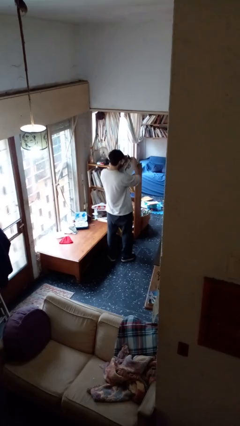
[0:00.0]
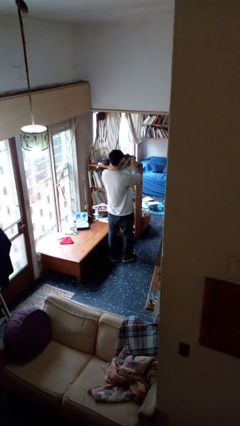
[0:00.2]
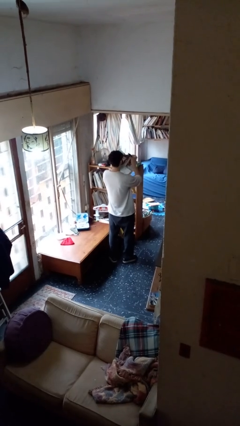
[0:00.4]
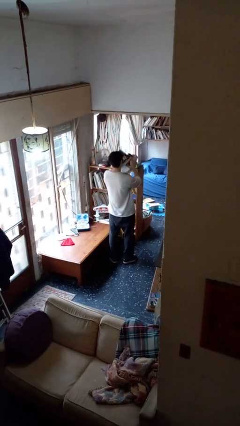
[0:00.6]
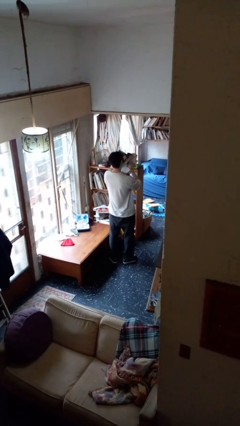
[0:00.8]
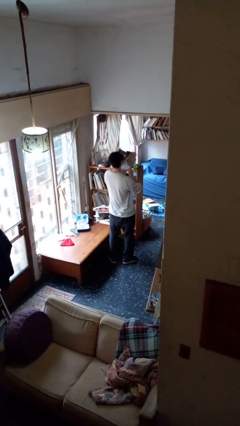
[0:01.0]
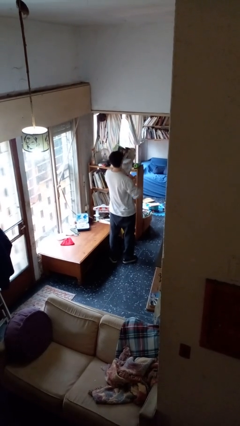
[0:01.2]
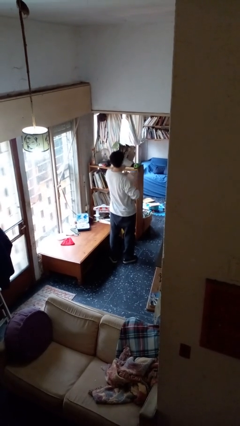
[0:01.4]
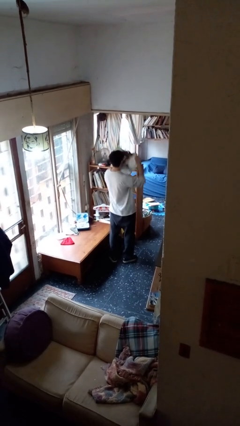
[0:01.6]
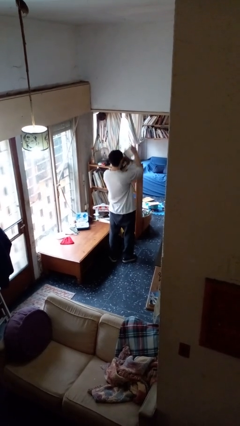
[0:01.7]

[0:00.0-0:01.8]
person tears paper

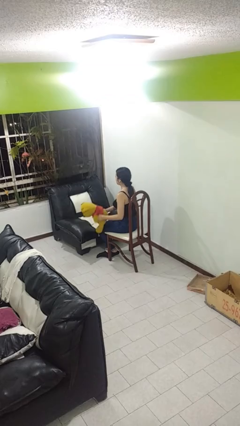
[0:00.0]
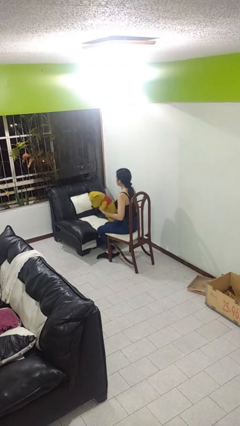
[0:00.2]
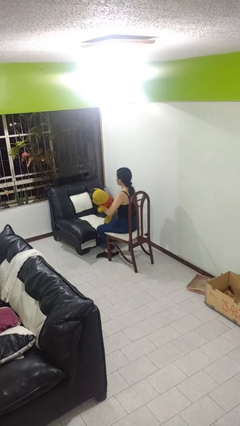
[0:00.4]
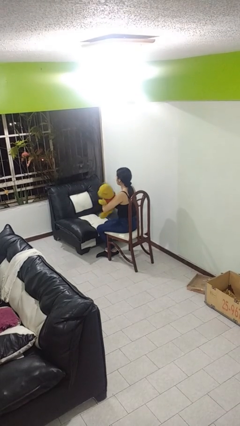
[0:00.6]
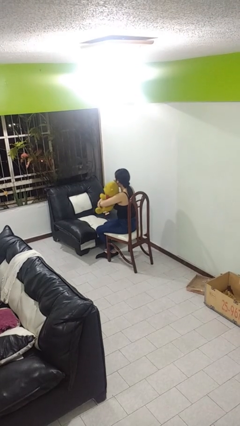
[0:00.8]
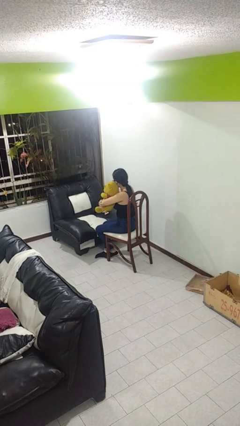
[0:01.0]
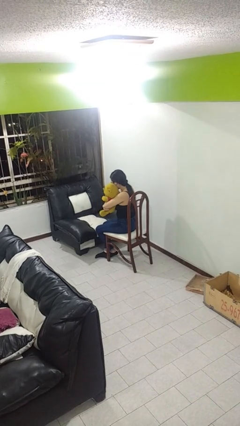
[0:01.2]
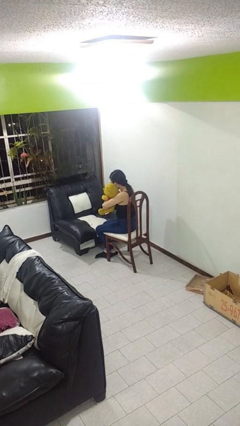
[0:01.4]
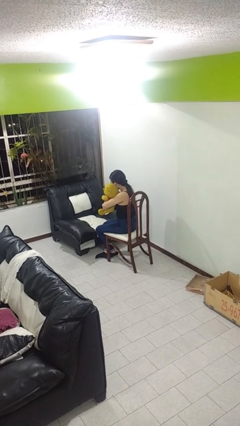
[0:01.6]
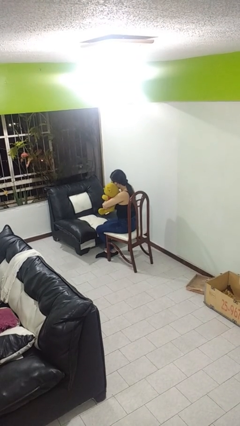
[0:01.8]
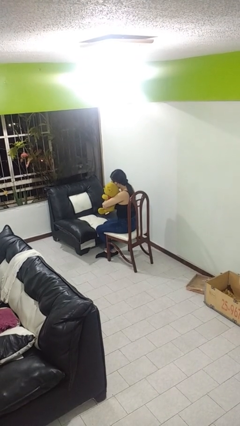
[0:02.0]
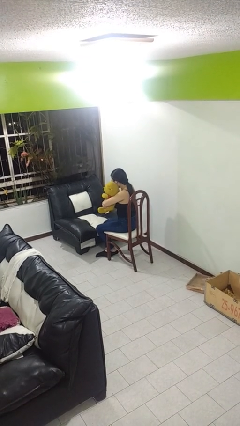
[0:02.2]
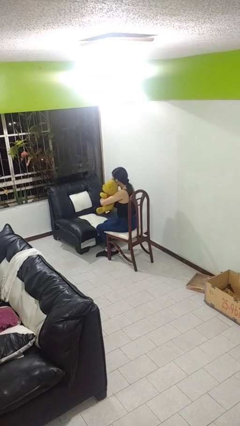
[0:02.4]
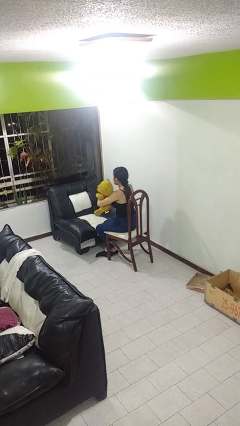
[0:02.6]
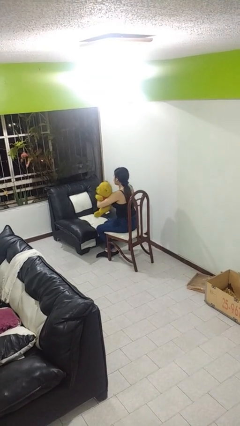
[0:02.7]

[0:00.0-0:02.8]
person hugs stuffed animal

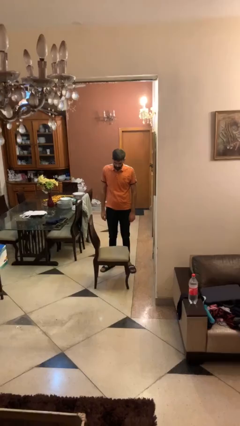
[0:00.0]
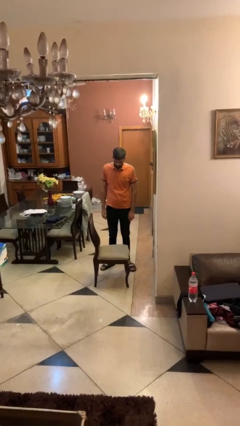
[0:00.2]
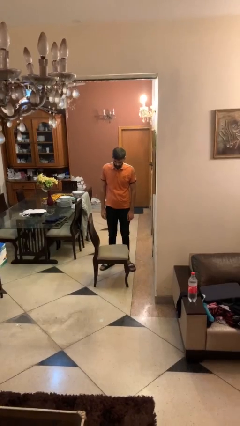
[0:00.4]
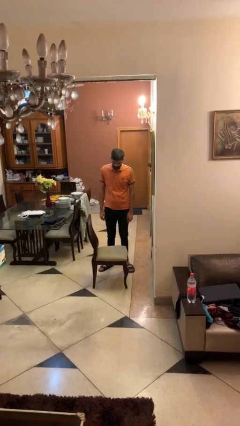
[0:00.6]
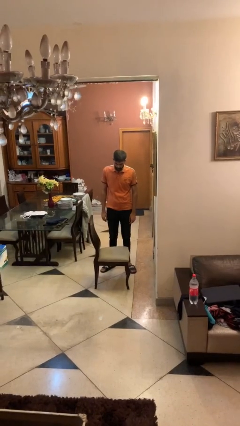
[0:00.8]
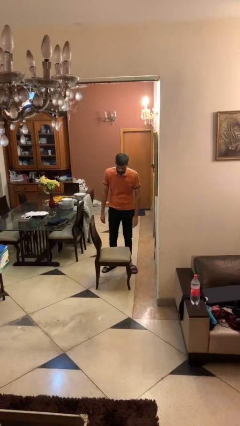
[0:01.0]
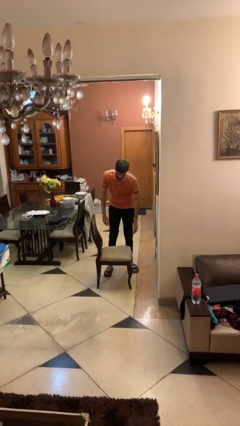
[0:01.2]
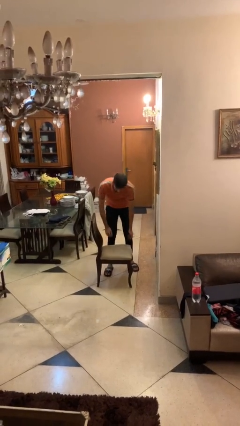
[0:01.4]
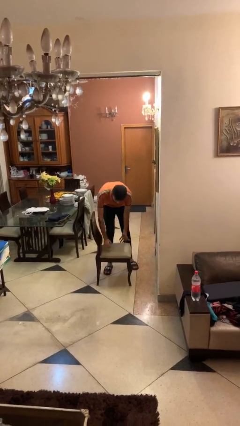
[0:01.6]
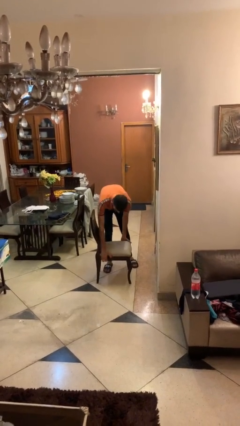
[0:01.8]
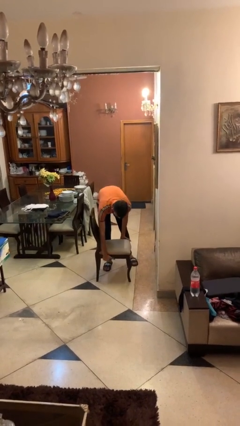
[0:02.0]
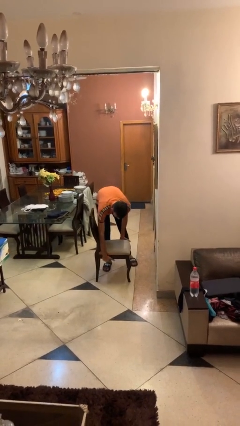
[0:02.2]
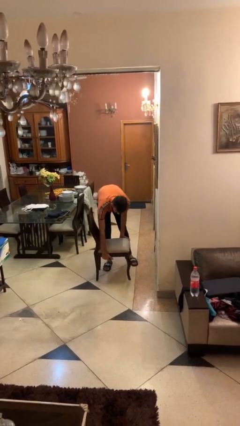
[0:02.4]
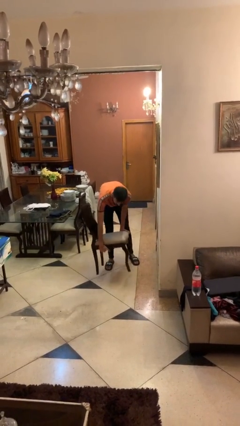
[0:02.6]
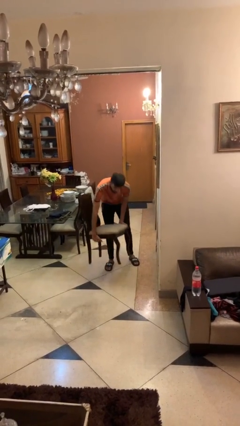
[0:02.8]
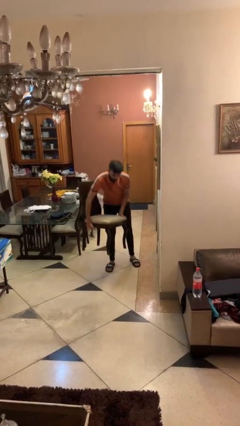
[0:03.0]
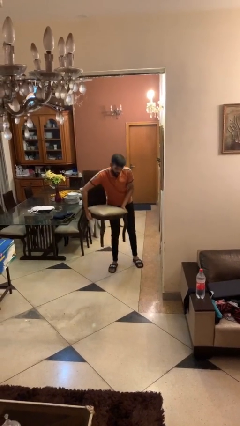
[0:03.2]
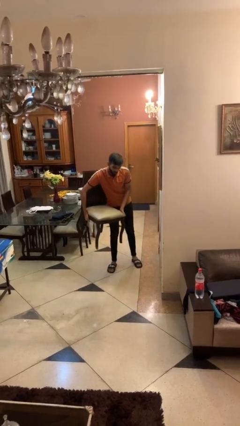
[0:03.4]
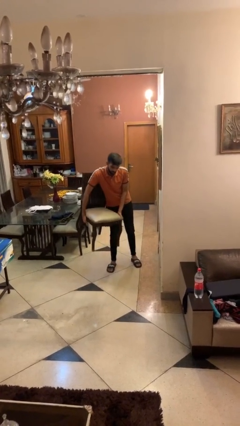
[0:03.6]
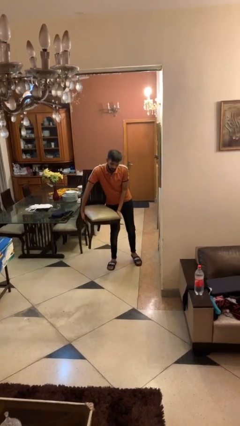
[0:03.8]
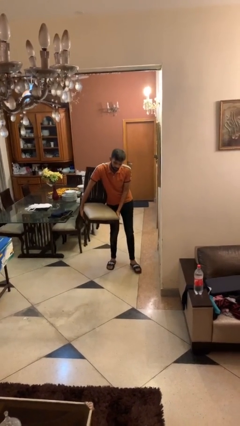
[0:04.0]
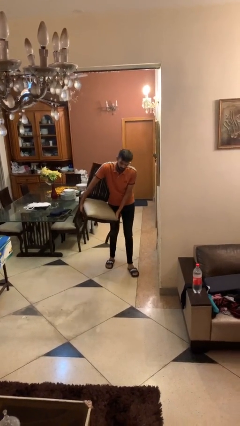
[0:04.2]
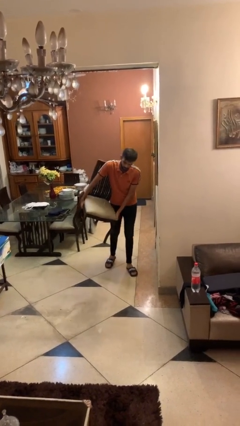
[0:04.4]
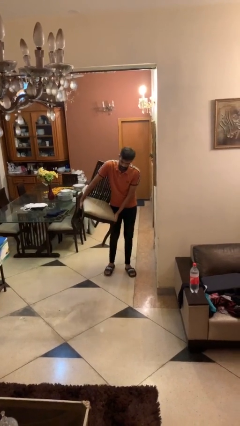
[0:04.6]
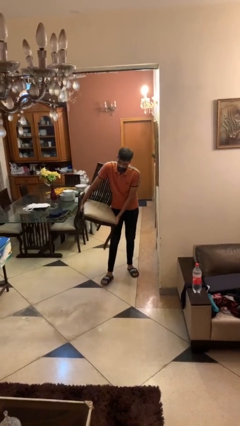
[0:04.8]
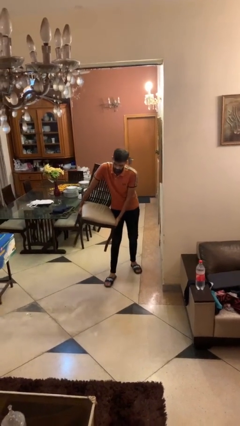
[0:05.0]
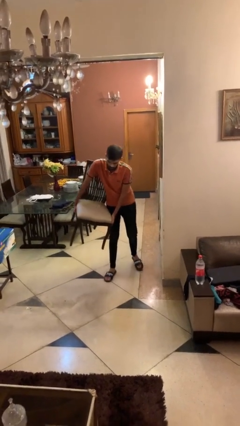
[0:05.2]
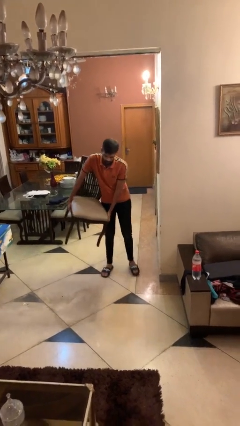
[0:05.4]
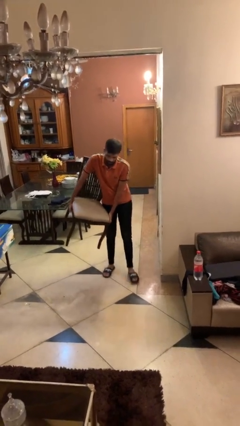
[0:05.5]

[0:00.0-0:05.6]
person carries heavy object

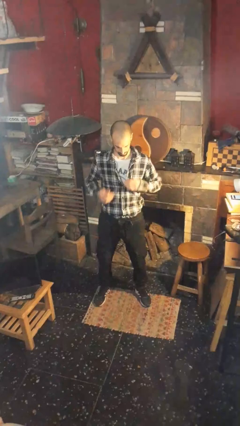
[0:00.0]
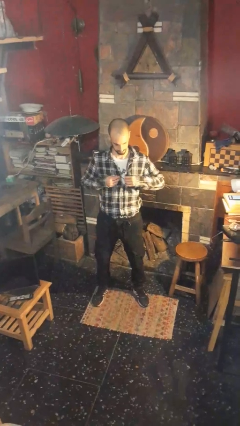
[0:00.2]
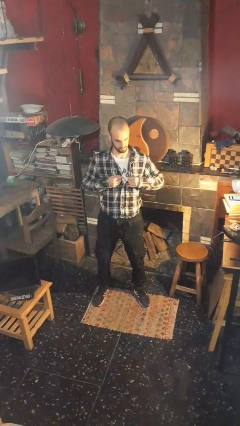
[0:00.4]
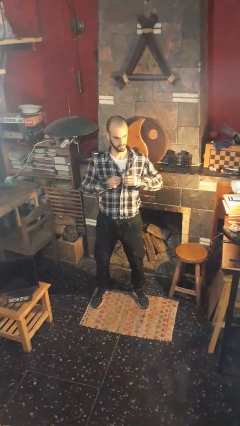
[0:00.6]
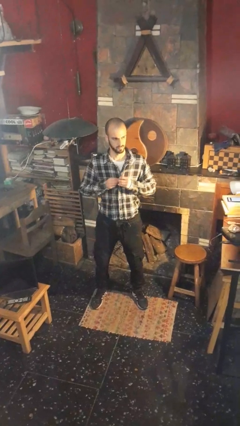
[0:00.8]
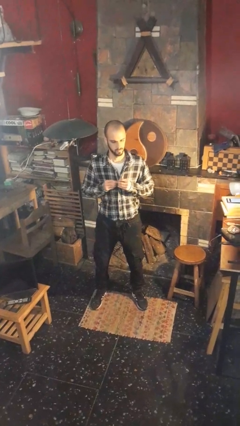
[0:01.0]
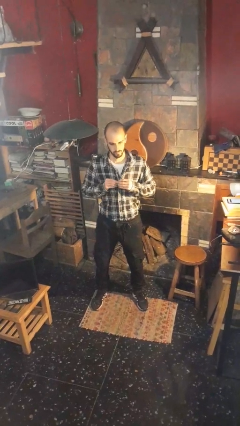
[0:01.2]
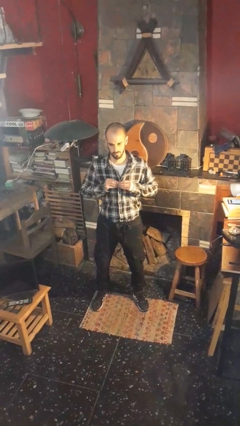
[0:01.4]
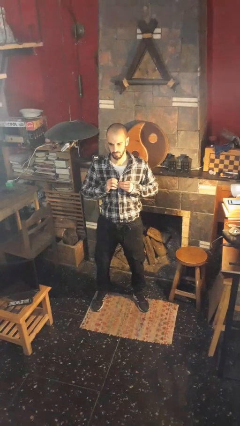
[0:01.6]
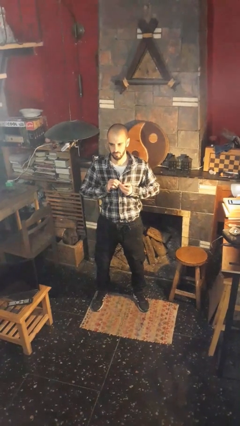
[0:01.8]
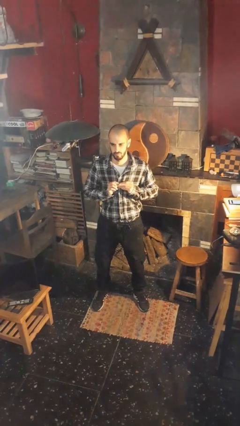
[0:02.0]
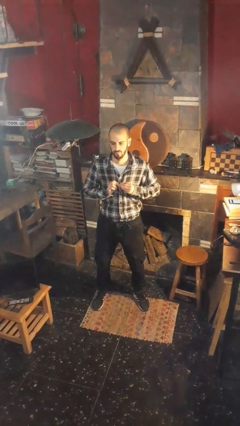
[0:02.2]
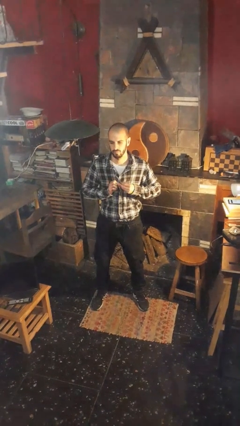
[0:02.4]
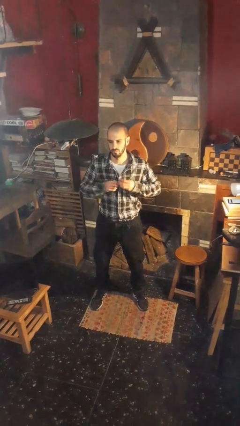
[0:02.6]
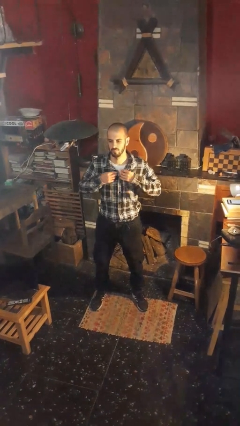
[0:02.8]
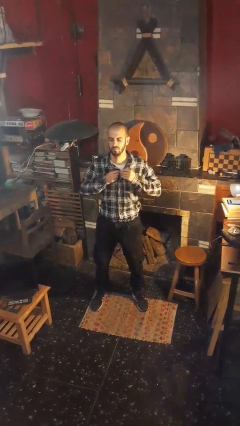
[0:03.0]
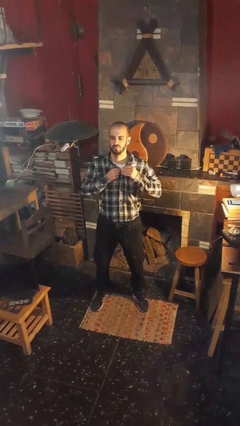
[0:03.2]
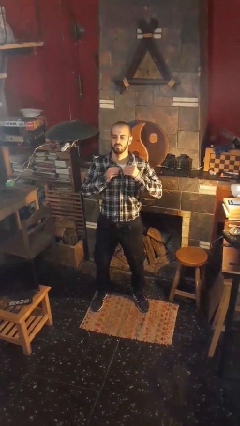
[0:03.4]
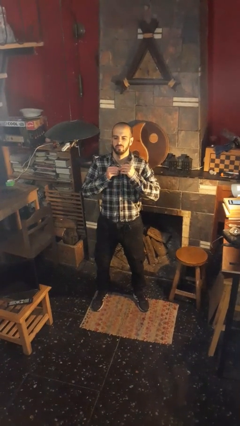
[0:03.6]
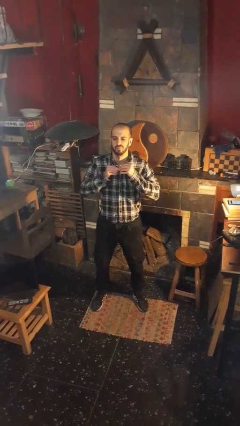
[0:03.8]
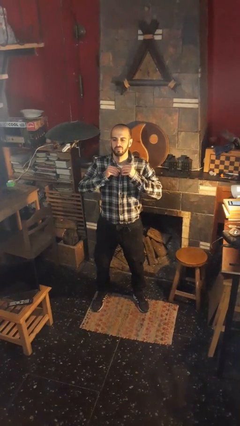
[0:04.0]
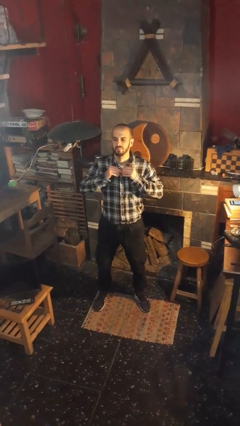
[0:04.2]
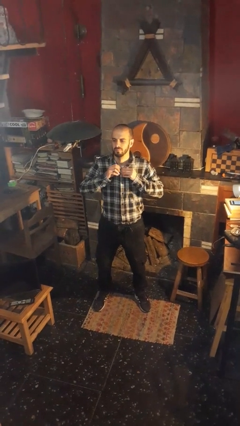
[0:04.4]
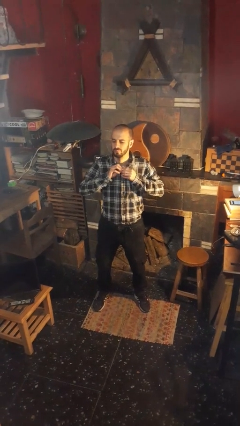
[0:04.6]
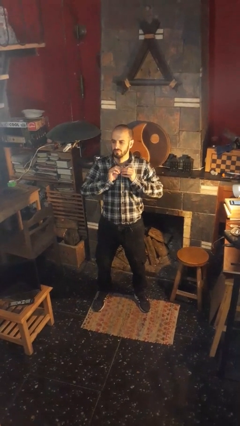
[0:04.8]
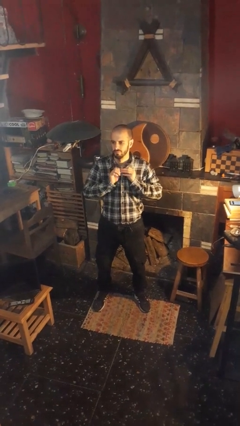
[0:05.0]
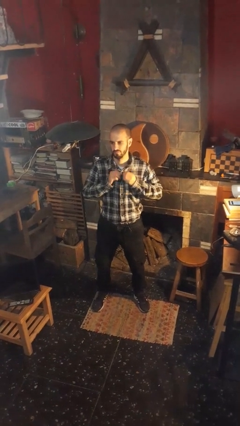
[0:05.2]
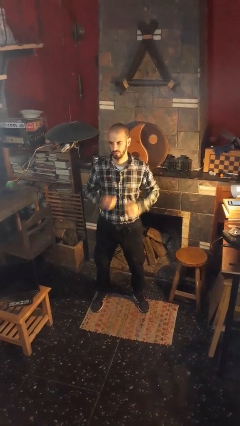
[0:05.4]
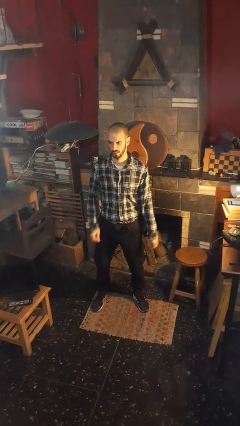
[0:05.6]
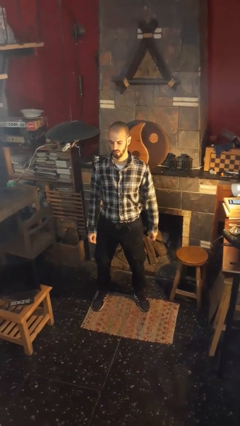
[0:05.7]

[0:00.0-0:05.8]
person buttons shirt

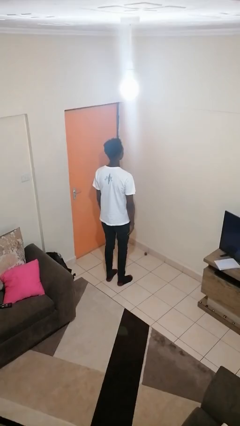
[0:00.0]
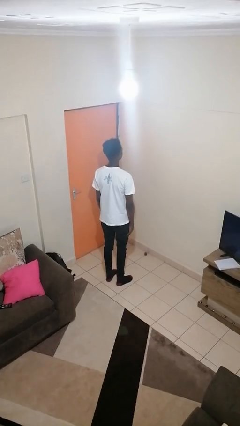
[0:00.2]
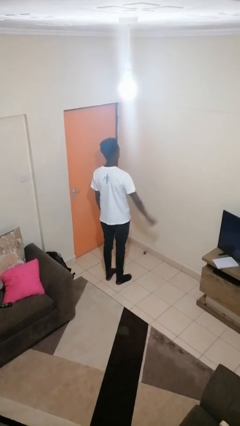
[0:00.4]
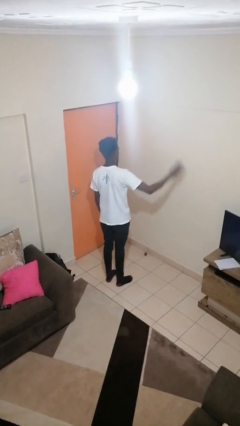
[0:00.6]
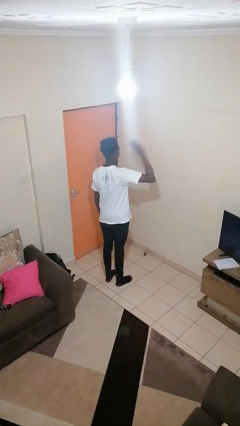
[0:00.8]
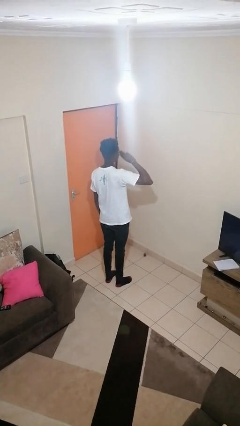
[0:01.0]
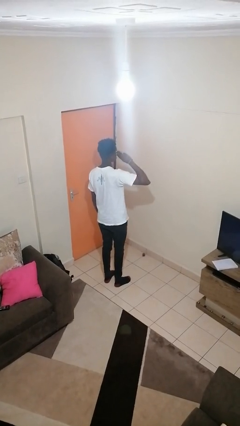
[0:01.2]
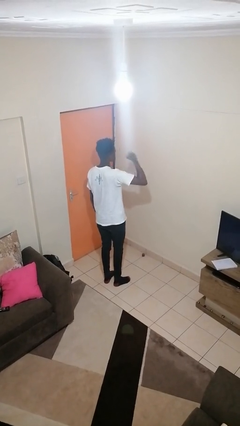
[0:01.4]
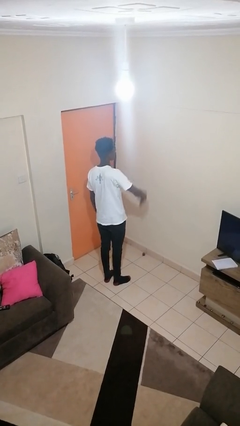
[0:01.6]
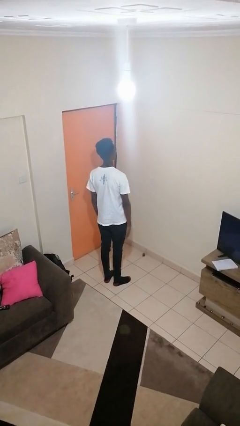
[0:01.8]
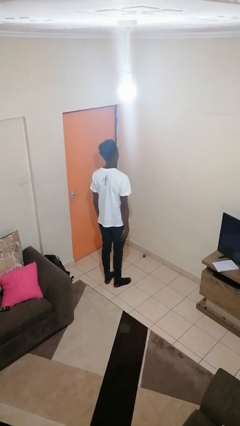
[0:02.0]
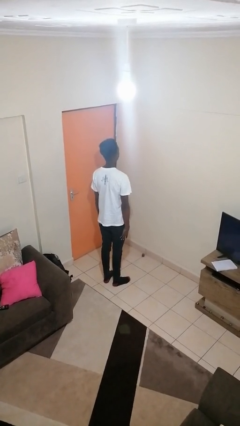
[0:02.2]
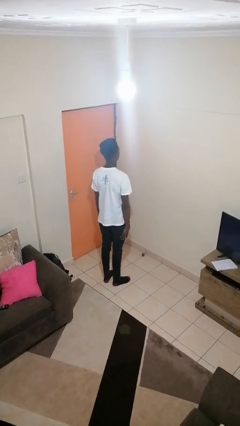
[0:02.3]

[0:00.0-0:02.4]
person salutes
